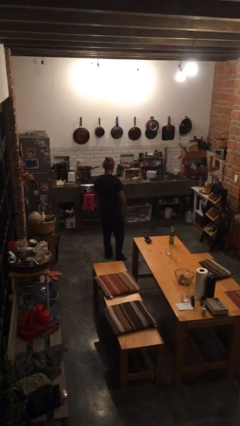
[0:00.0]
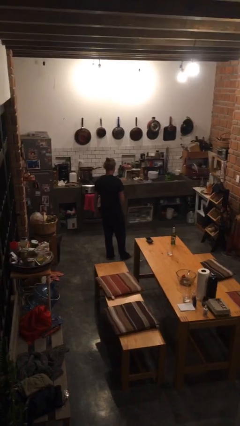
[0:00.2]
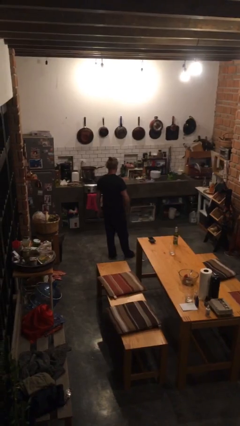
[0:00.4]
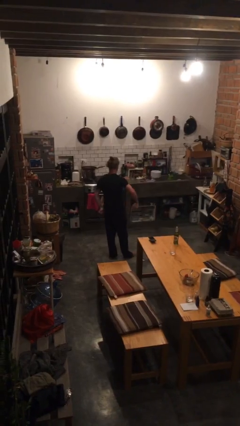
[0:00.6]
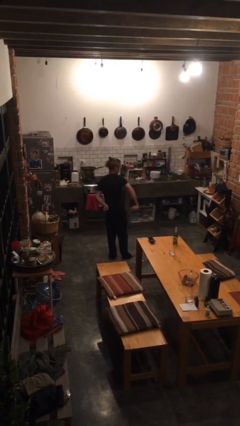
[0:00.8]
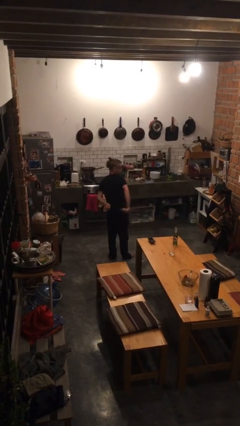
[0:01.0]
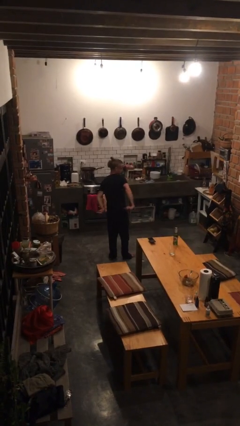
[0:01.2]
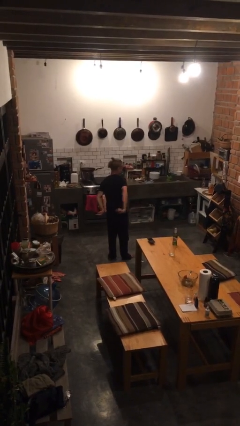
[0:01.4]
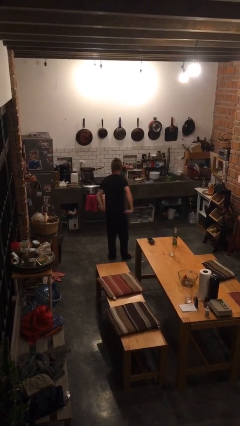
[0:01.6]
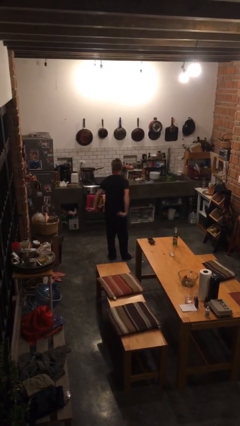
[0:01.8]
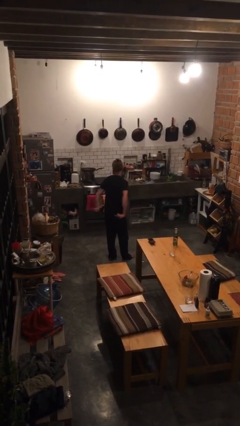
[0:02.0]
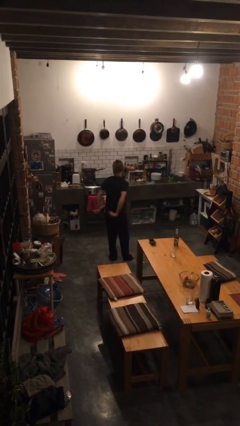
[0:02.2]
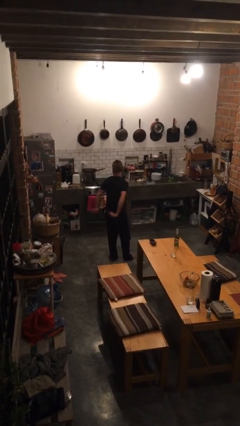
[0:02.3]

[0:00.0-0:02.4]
person gestures behind me

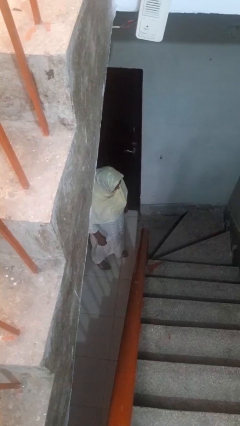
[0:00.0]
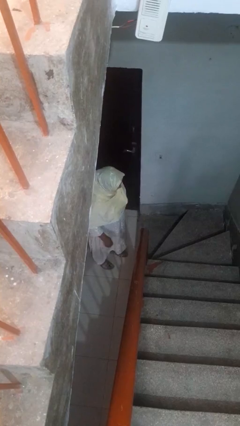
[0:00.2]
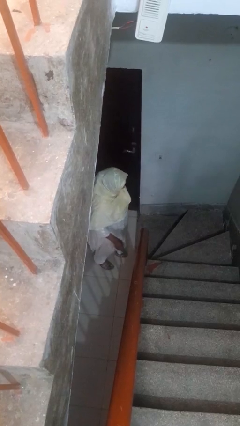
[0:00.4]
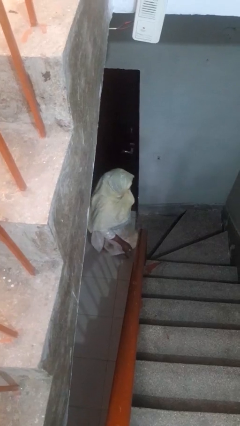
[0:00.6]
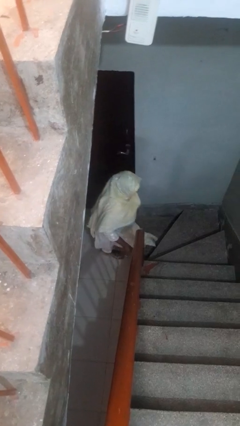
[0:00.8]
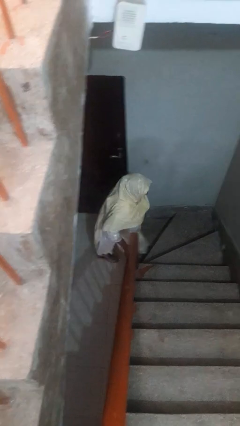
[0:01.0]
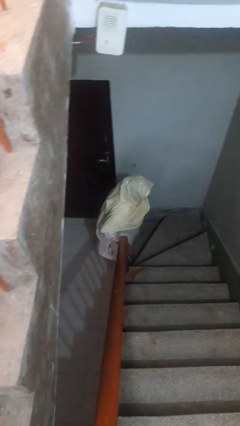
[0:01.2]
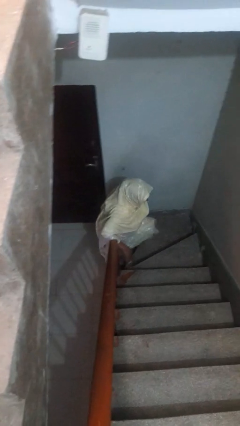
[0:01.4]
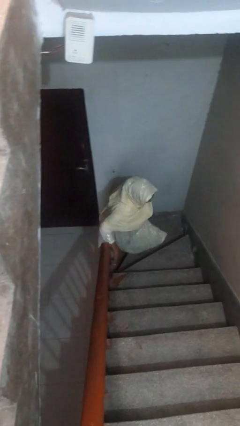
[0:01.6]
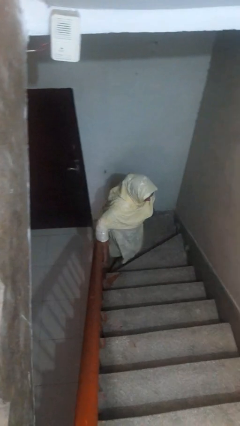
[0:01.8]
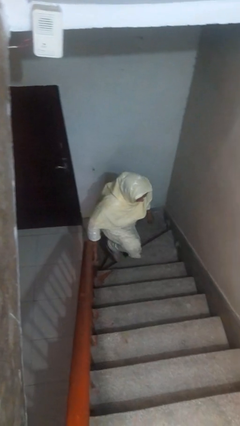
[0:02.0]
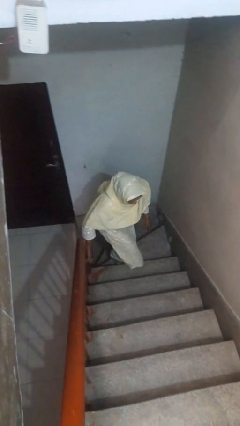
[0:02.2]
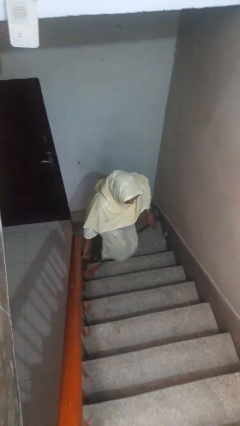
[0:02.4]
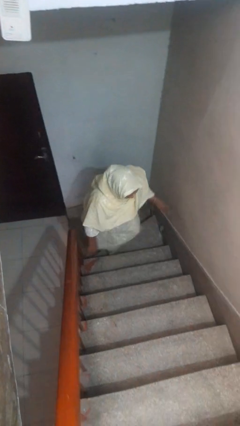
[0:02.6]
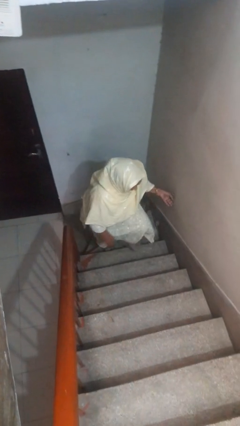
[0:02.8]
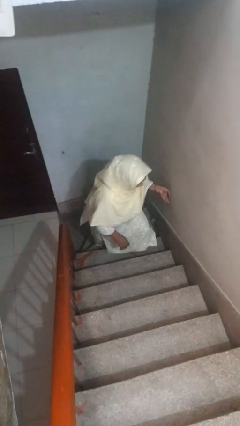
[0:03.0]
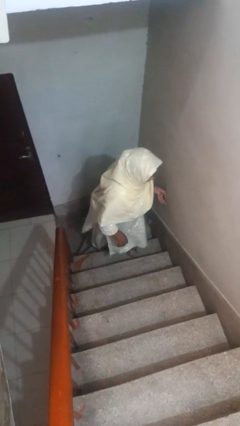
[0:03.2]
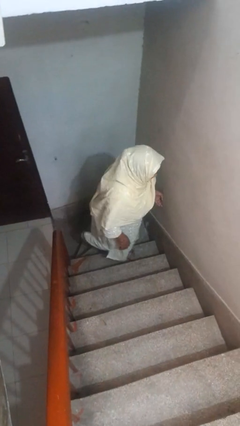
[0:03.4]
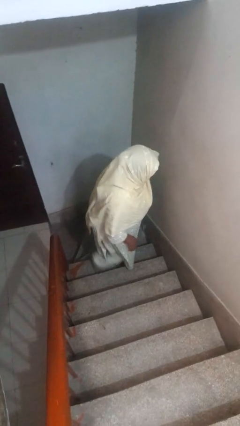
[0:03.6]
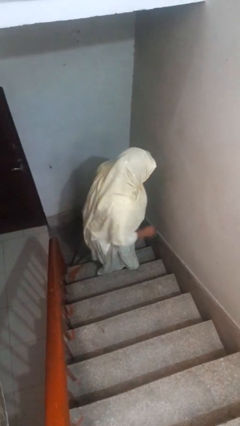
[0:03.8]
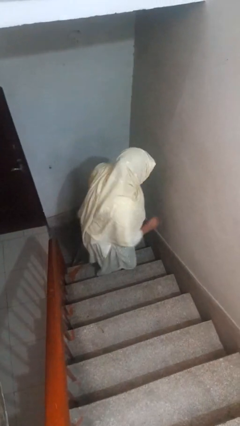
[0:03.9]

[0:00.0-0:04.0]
person climbs up stairs

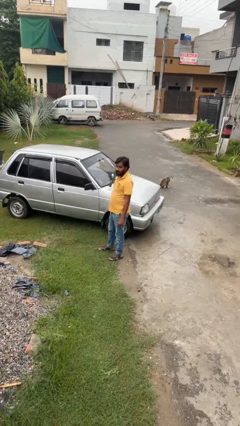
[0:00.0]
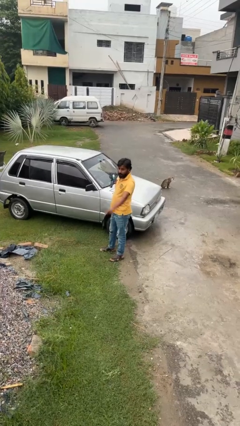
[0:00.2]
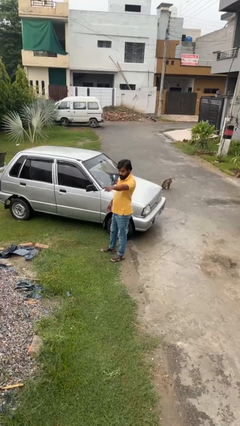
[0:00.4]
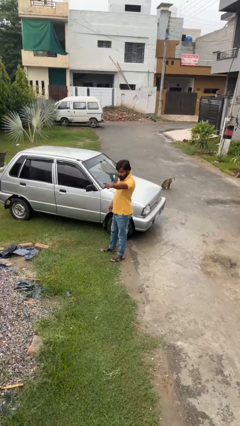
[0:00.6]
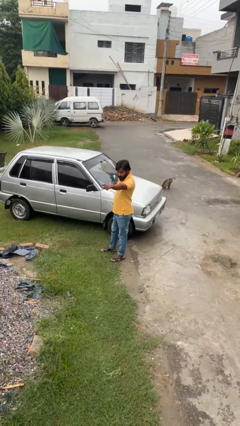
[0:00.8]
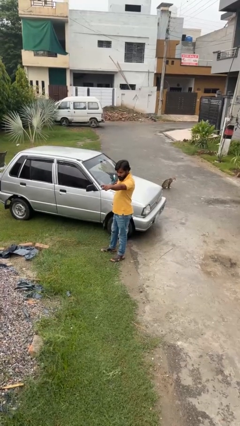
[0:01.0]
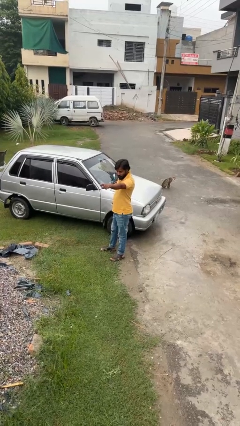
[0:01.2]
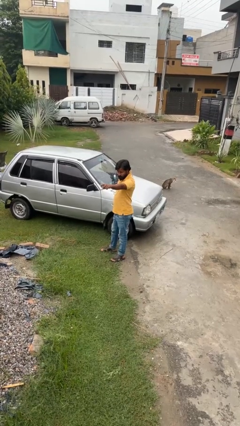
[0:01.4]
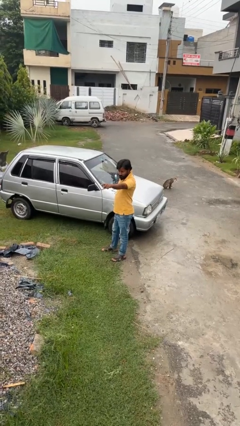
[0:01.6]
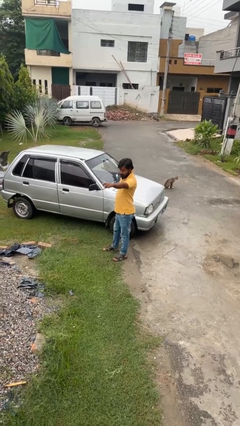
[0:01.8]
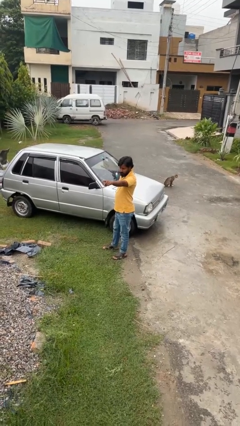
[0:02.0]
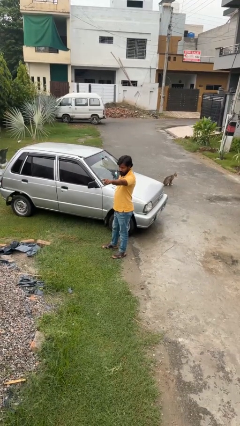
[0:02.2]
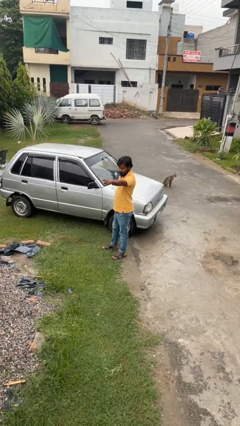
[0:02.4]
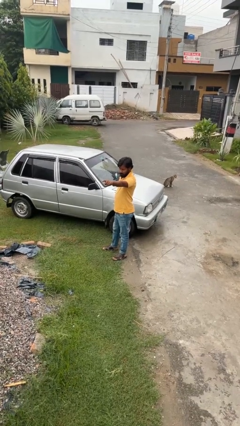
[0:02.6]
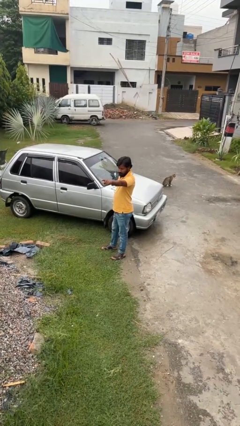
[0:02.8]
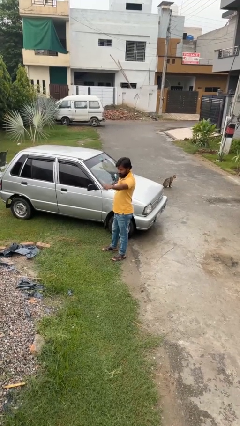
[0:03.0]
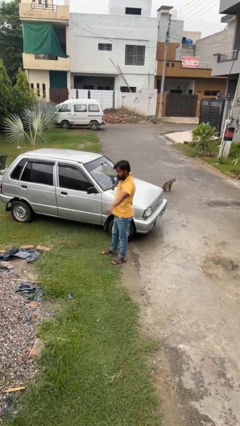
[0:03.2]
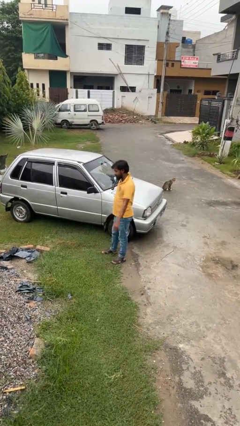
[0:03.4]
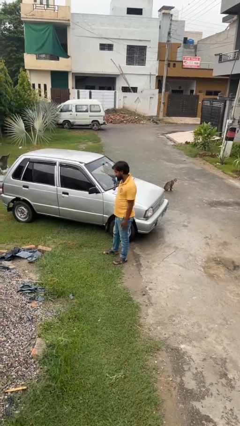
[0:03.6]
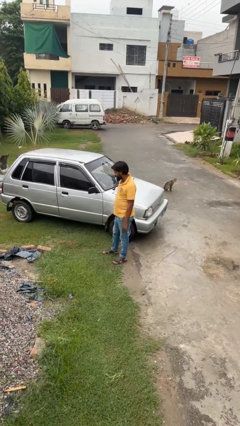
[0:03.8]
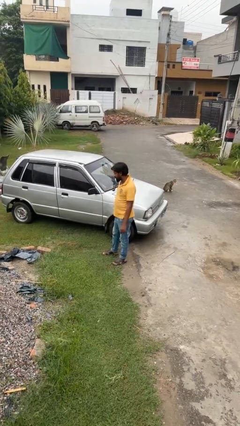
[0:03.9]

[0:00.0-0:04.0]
person points at person

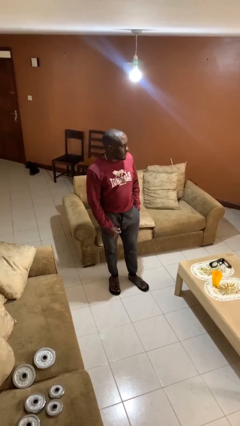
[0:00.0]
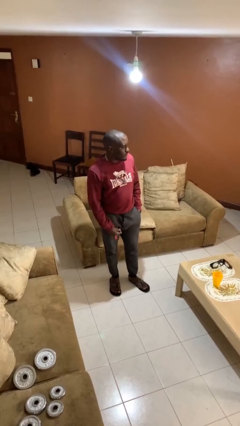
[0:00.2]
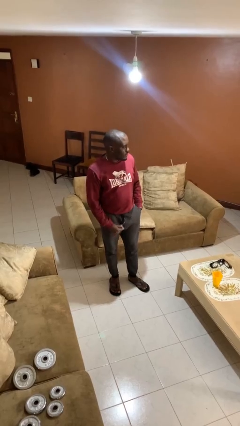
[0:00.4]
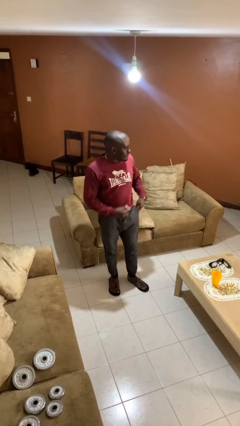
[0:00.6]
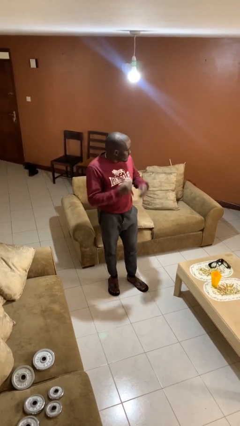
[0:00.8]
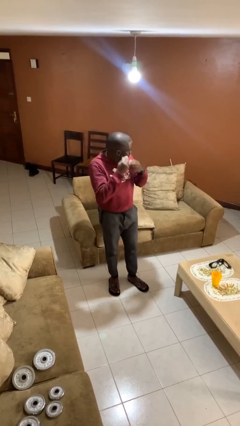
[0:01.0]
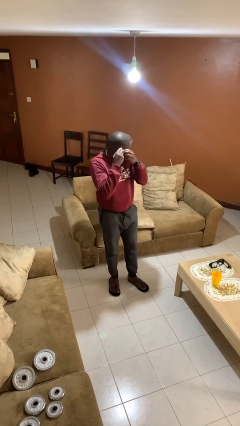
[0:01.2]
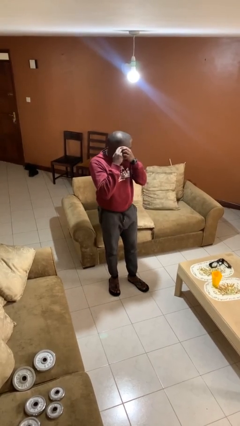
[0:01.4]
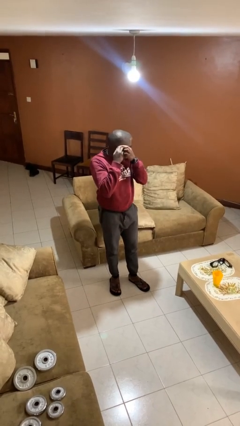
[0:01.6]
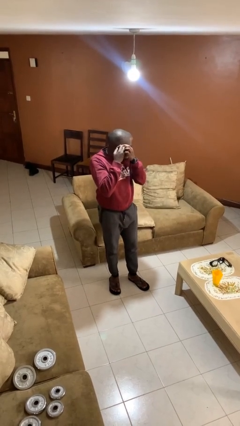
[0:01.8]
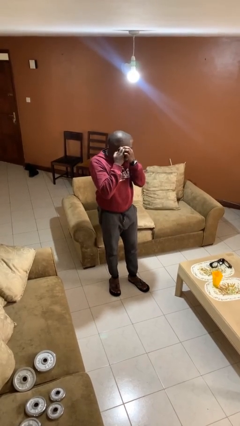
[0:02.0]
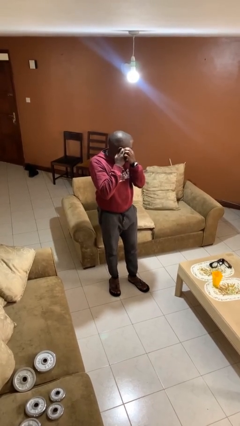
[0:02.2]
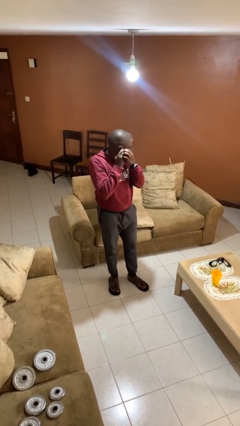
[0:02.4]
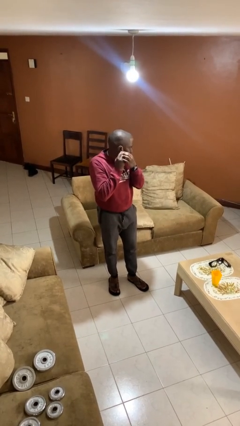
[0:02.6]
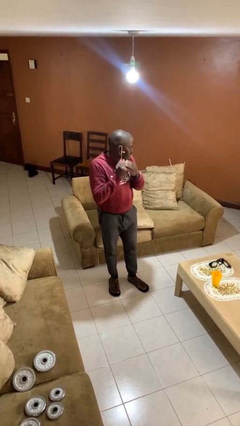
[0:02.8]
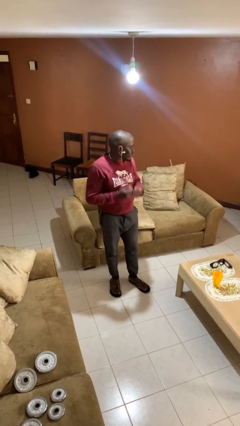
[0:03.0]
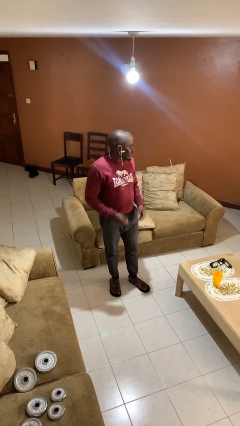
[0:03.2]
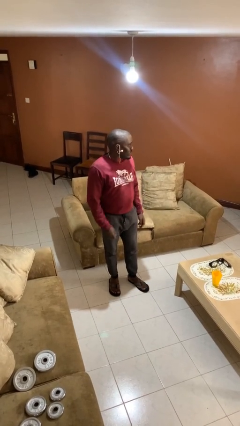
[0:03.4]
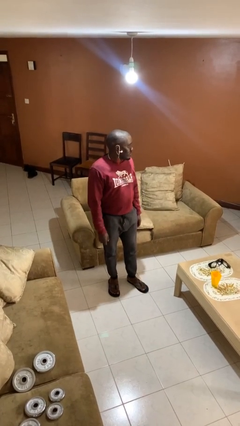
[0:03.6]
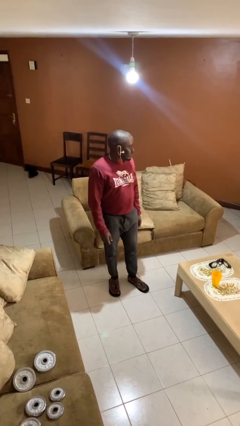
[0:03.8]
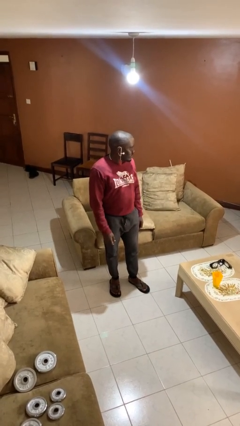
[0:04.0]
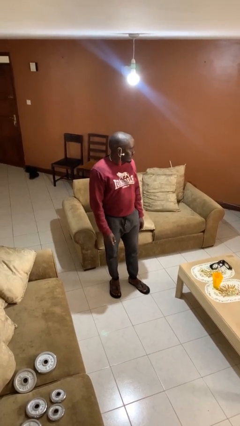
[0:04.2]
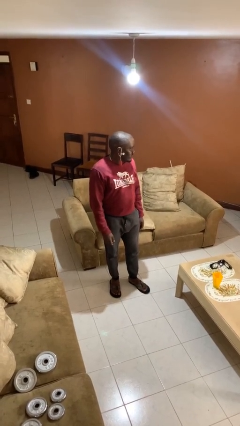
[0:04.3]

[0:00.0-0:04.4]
person puts on earrings

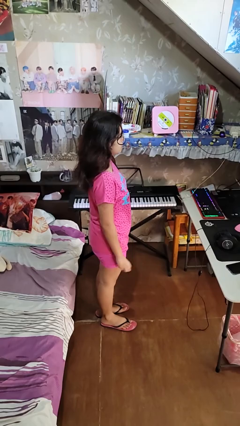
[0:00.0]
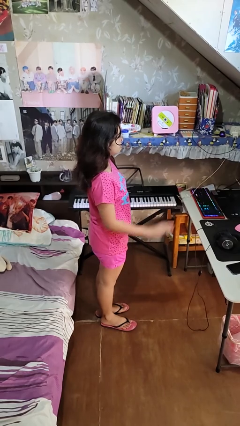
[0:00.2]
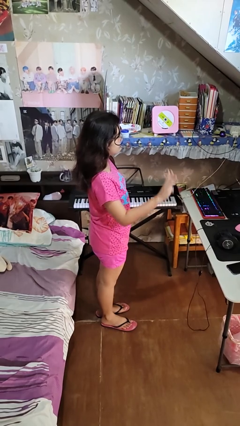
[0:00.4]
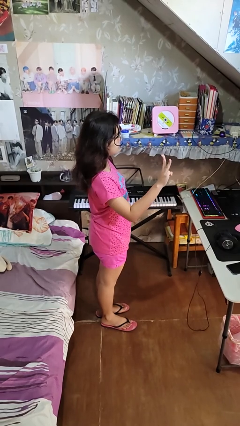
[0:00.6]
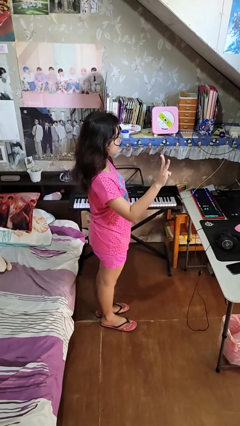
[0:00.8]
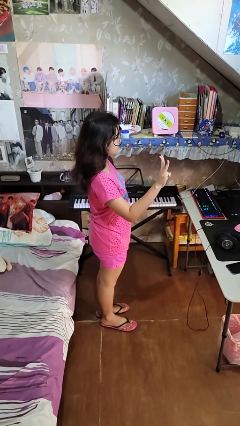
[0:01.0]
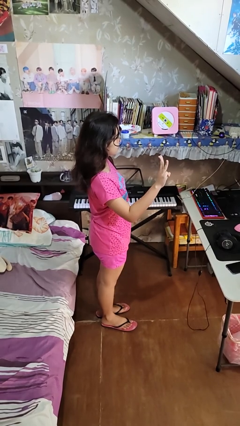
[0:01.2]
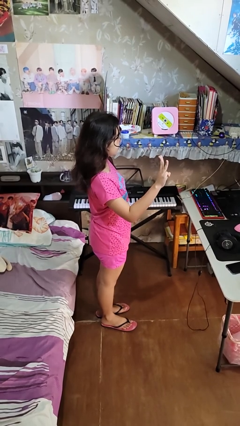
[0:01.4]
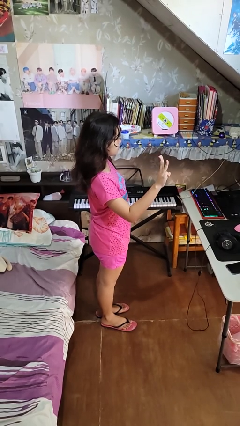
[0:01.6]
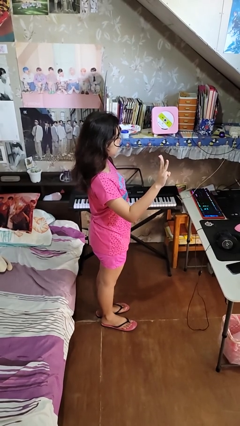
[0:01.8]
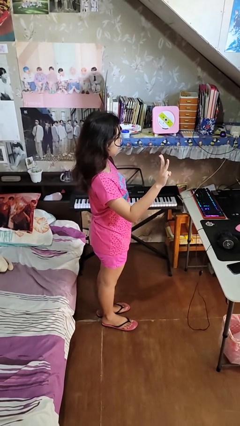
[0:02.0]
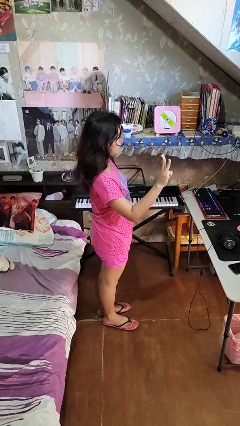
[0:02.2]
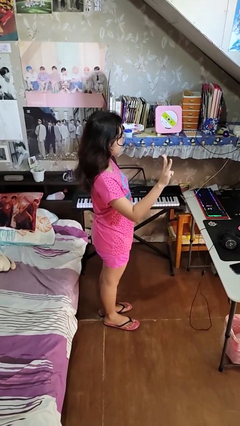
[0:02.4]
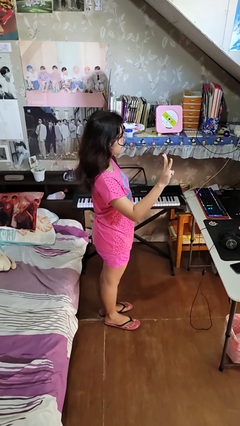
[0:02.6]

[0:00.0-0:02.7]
person gestures number three

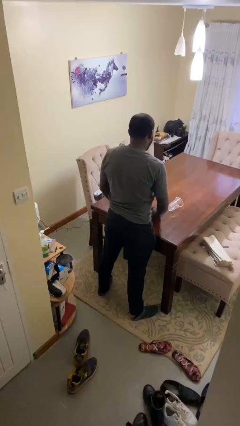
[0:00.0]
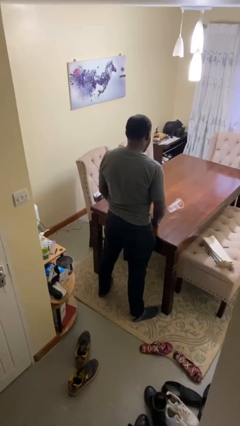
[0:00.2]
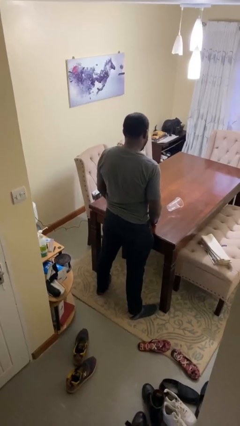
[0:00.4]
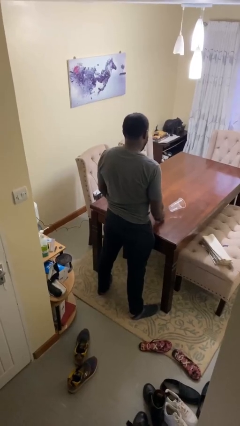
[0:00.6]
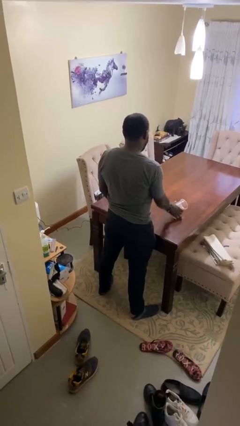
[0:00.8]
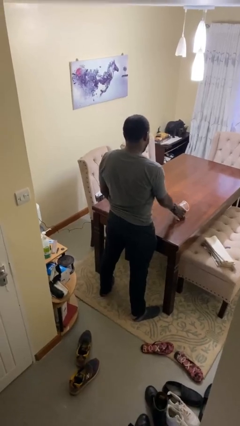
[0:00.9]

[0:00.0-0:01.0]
person sets upright glass
